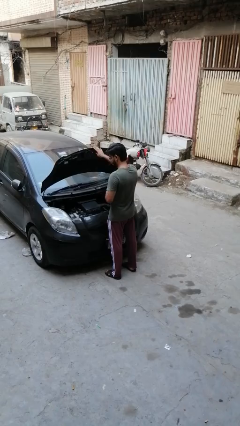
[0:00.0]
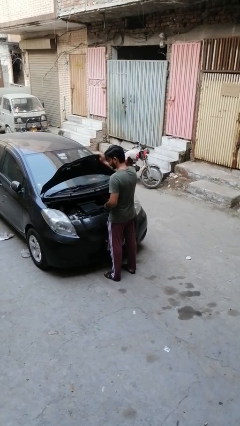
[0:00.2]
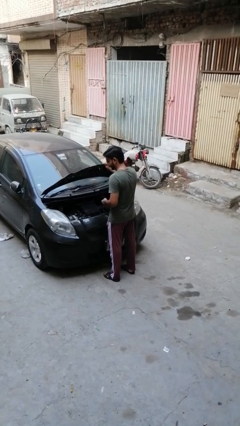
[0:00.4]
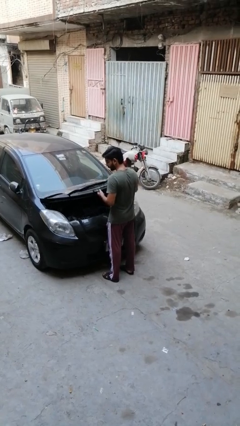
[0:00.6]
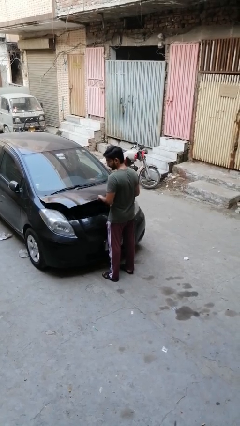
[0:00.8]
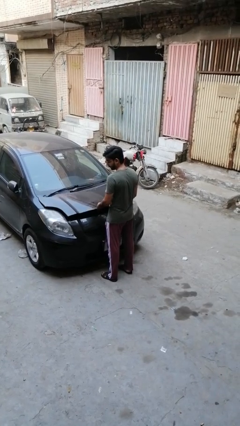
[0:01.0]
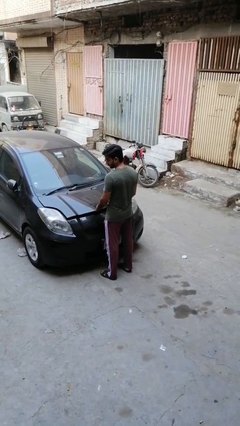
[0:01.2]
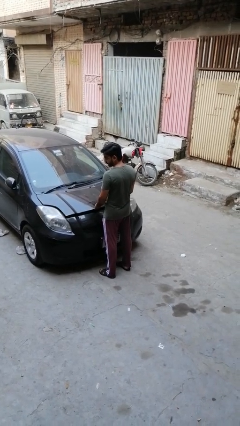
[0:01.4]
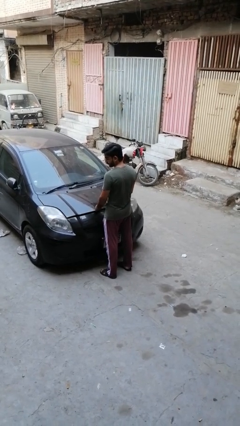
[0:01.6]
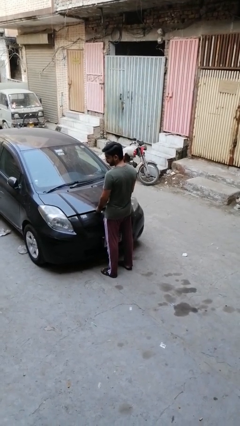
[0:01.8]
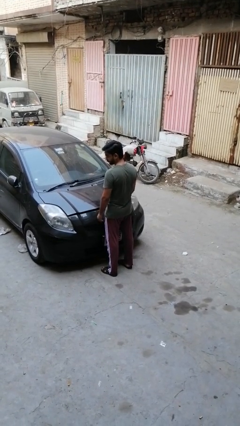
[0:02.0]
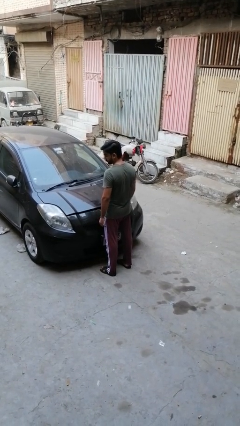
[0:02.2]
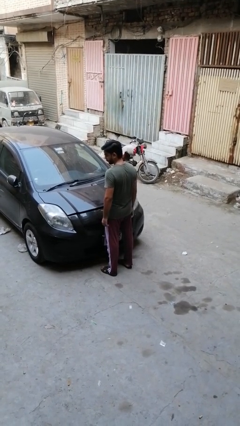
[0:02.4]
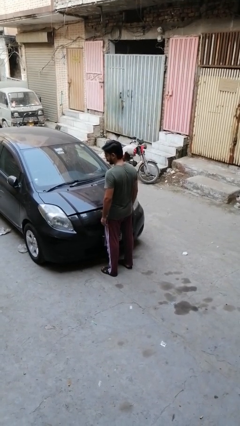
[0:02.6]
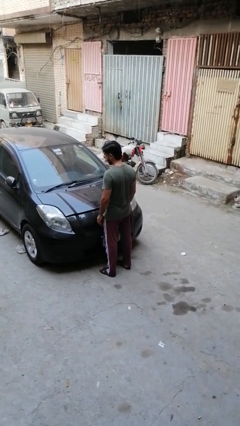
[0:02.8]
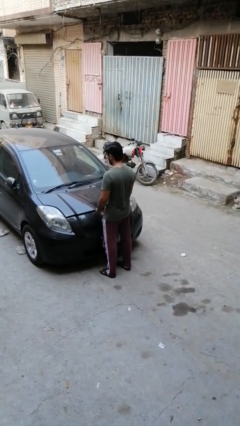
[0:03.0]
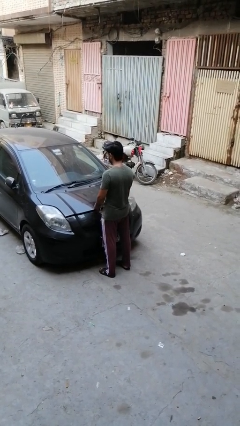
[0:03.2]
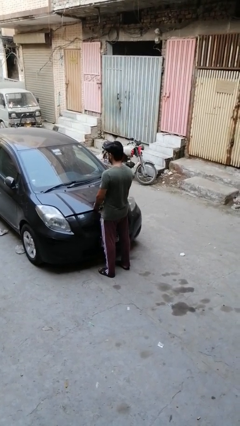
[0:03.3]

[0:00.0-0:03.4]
person closes car hood

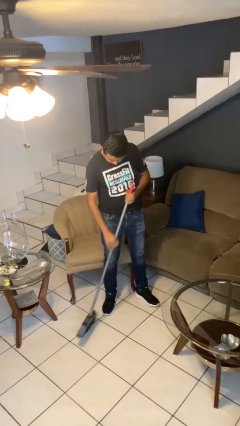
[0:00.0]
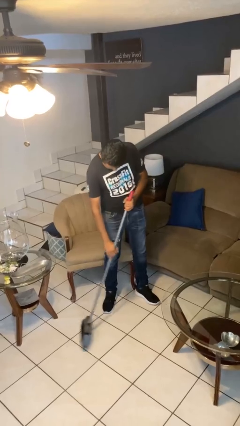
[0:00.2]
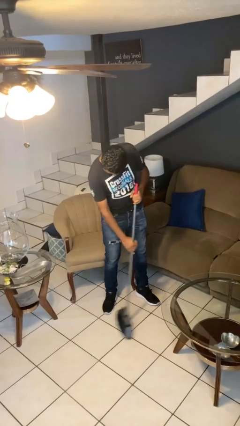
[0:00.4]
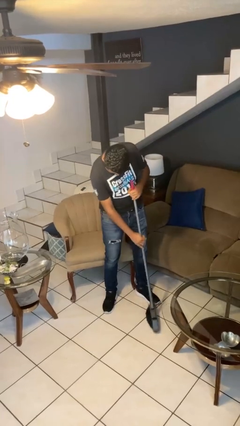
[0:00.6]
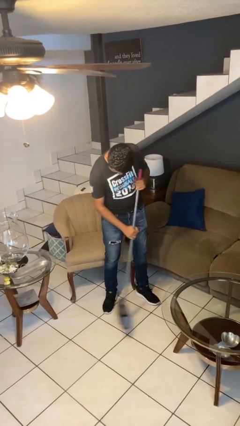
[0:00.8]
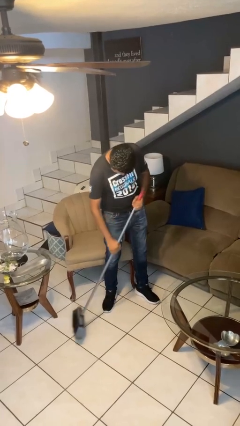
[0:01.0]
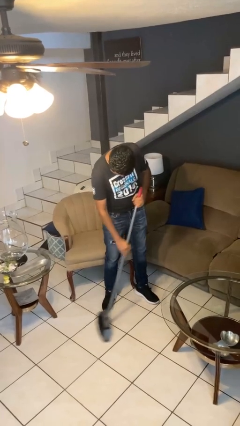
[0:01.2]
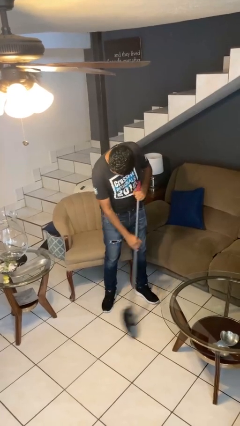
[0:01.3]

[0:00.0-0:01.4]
person sweeps floor

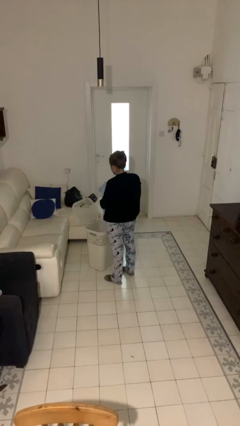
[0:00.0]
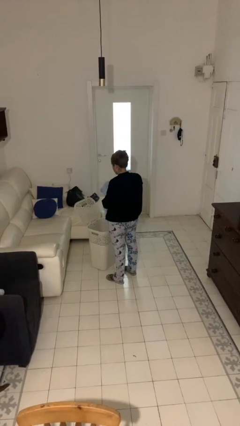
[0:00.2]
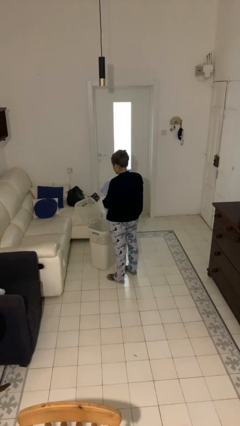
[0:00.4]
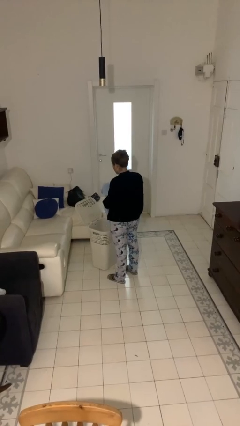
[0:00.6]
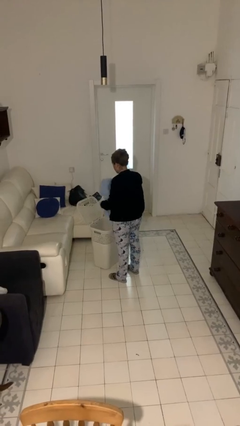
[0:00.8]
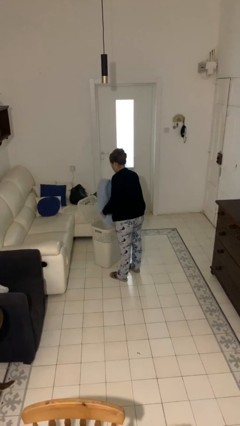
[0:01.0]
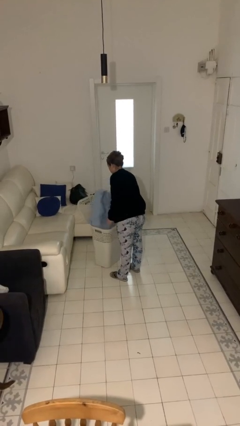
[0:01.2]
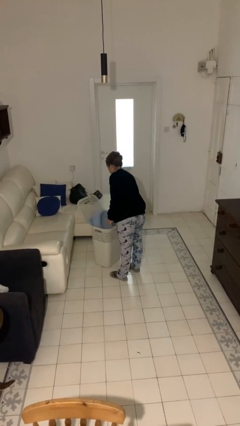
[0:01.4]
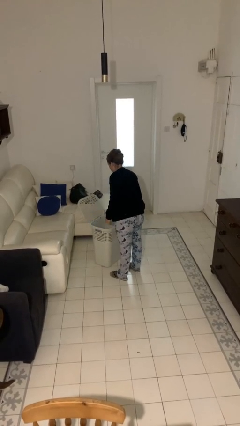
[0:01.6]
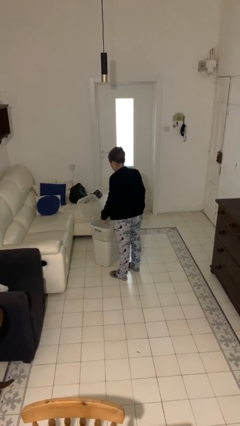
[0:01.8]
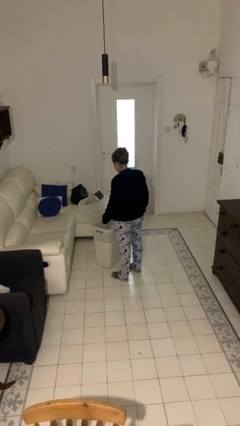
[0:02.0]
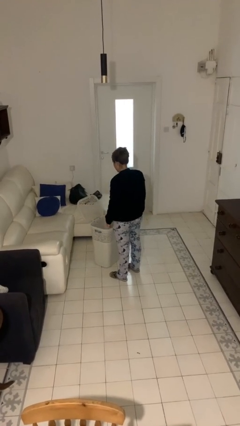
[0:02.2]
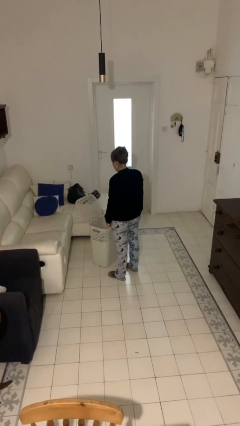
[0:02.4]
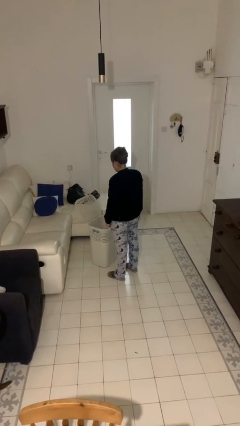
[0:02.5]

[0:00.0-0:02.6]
person puts object into basket

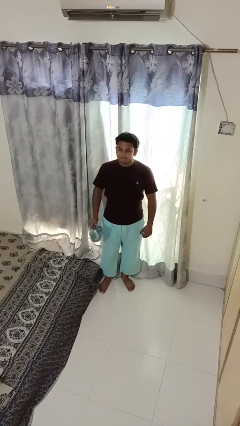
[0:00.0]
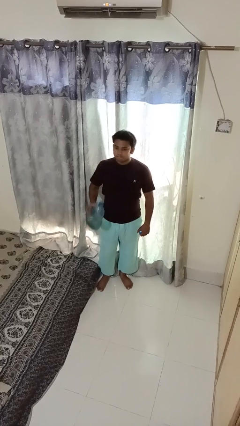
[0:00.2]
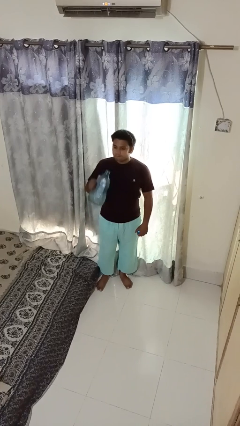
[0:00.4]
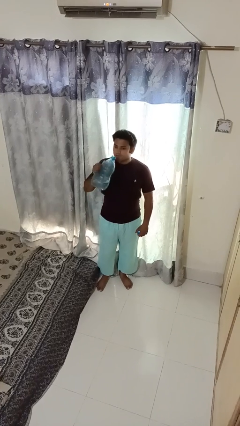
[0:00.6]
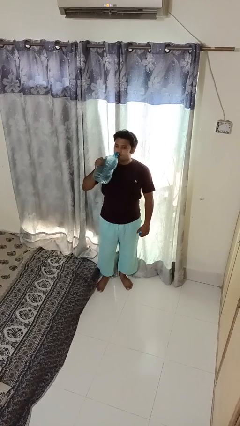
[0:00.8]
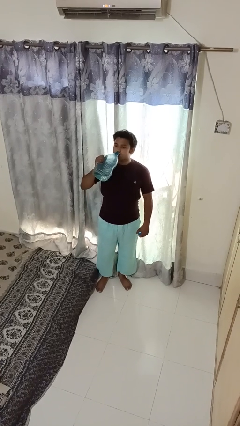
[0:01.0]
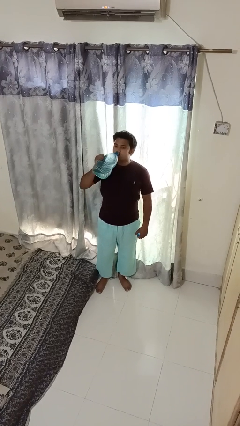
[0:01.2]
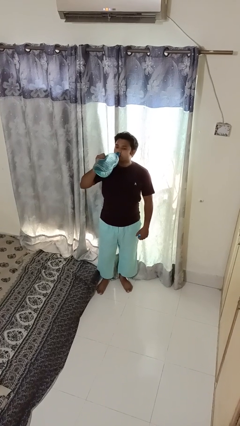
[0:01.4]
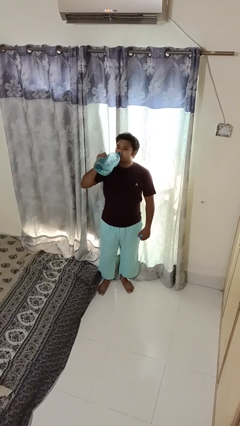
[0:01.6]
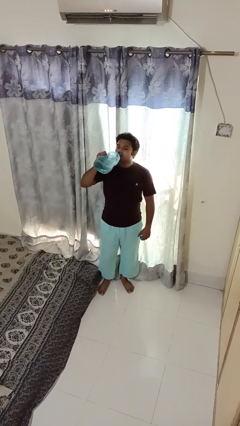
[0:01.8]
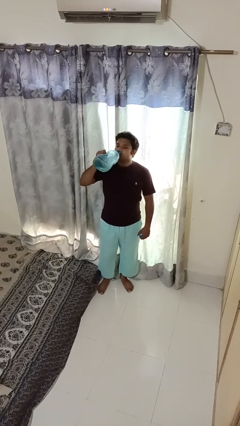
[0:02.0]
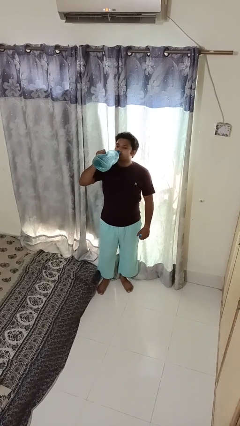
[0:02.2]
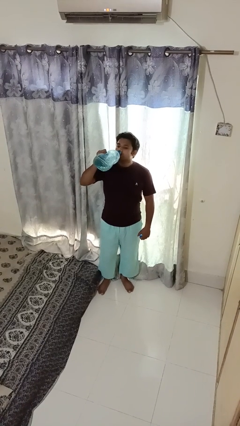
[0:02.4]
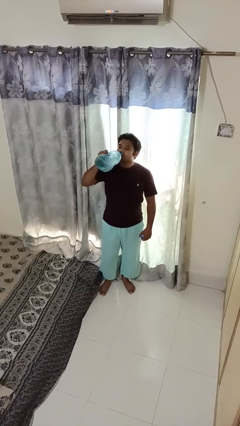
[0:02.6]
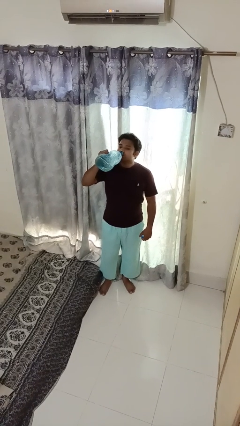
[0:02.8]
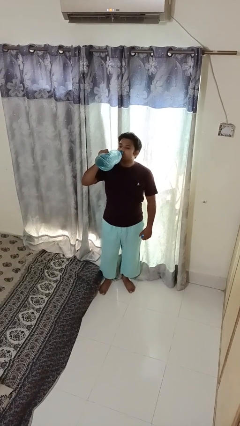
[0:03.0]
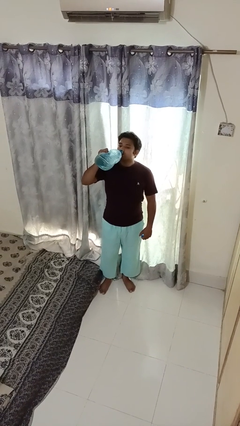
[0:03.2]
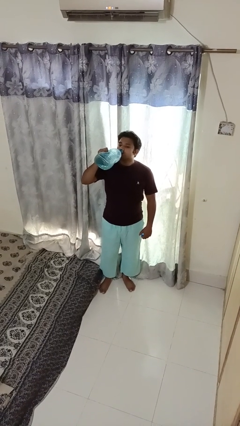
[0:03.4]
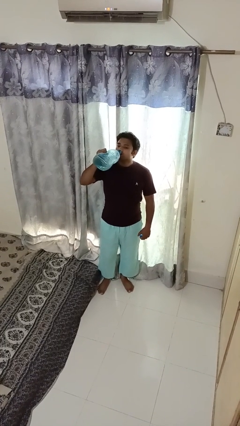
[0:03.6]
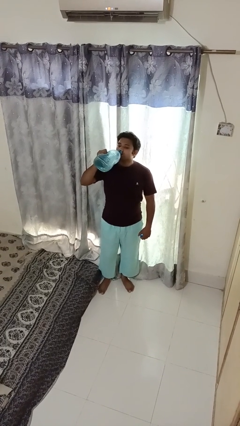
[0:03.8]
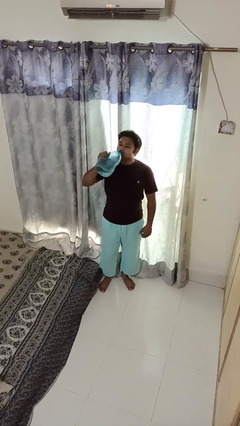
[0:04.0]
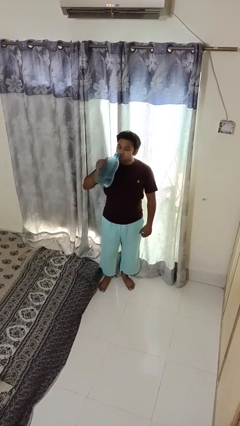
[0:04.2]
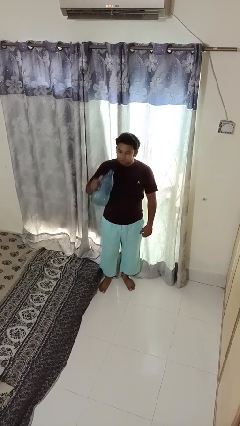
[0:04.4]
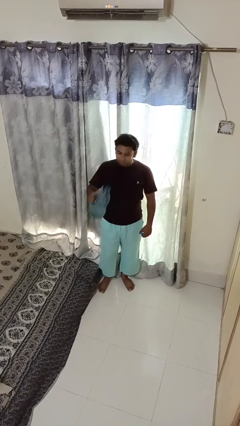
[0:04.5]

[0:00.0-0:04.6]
person drinks from bottle

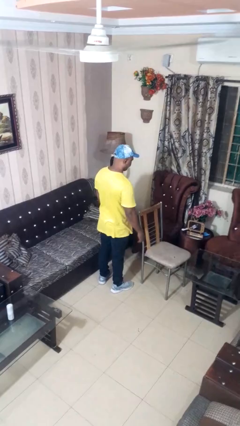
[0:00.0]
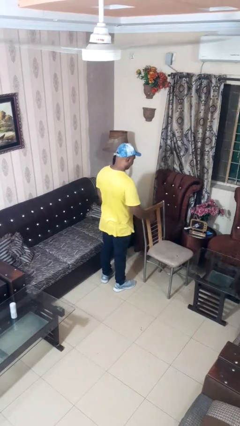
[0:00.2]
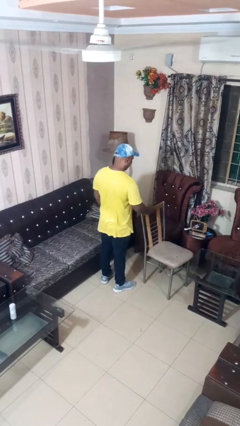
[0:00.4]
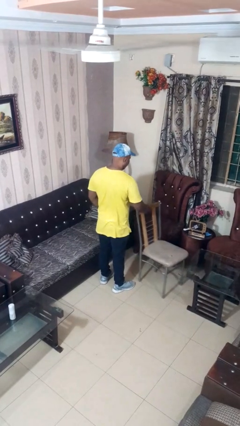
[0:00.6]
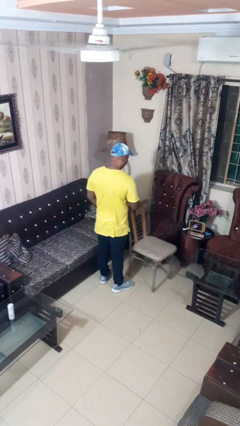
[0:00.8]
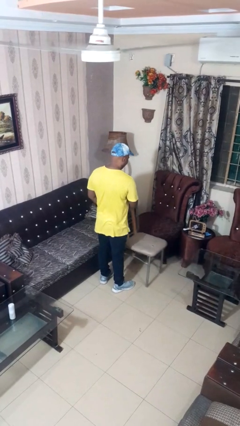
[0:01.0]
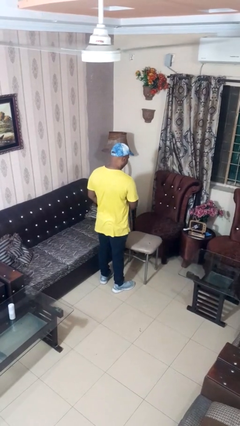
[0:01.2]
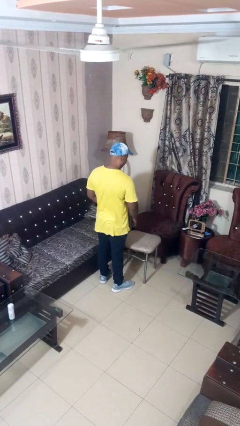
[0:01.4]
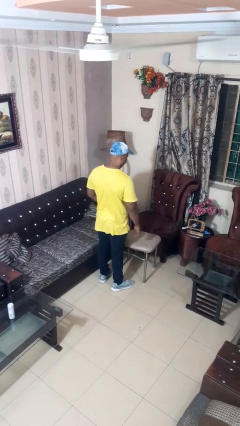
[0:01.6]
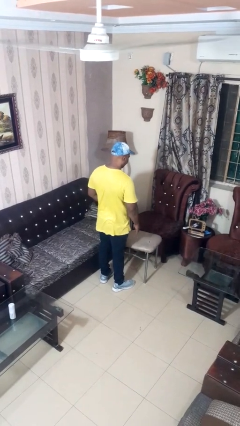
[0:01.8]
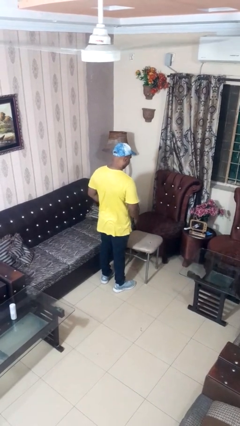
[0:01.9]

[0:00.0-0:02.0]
person pulls out chair

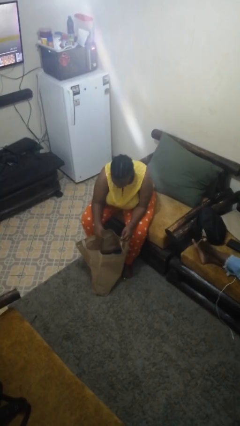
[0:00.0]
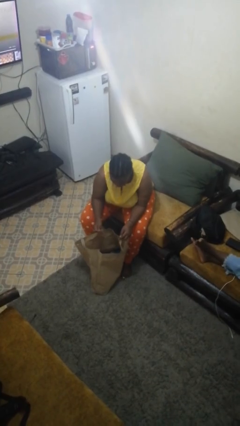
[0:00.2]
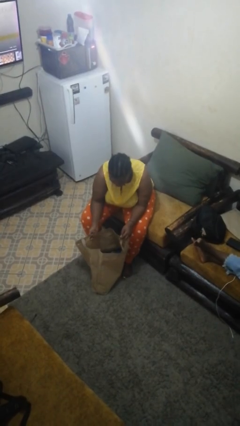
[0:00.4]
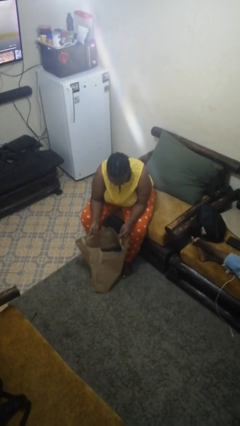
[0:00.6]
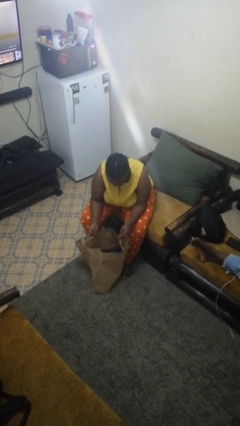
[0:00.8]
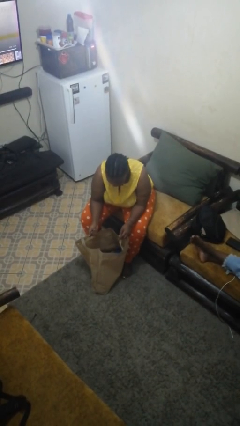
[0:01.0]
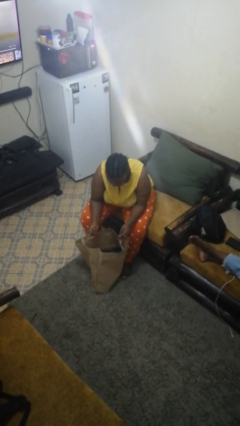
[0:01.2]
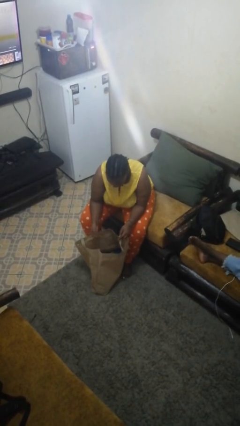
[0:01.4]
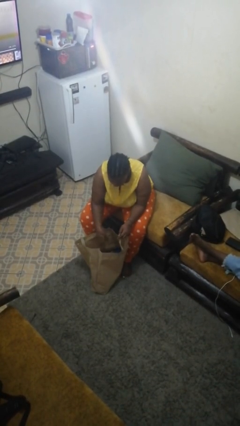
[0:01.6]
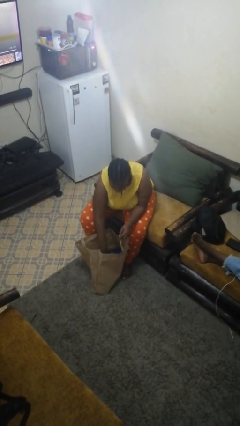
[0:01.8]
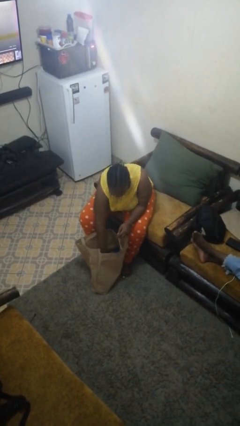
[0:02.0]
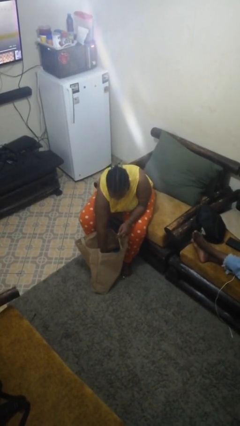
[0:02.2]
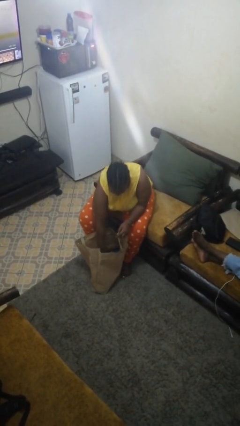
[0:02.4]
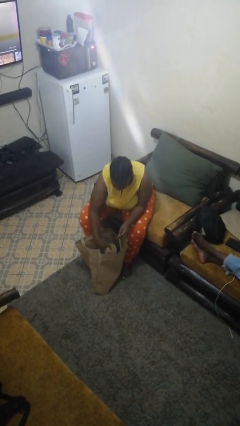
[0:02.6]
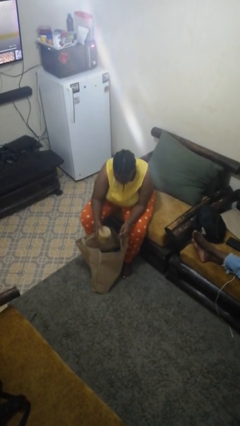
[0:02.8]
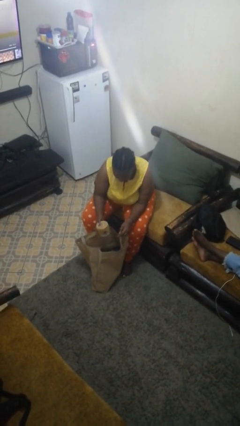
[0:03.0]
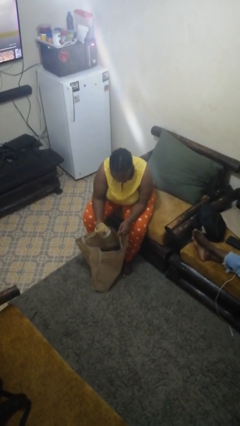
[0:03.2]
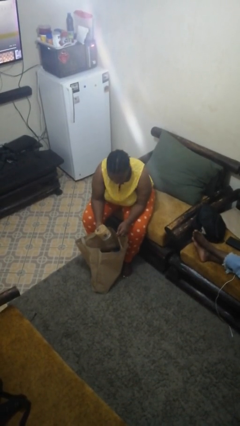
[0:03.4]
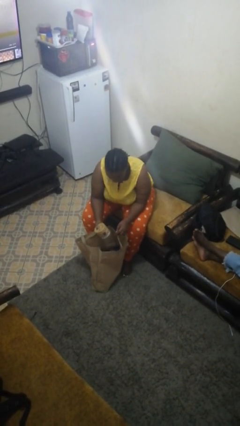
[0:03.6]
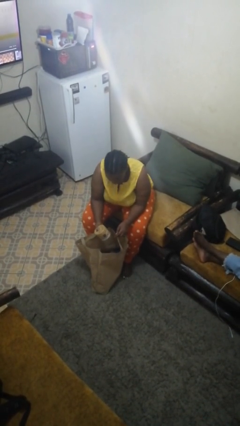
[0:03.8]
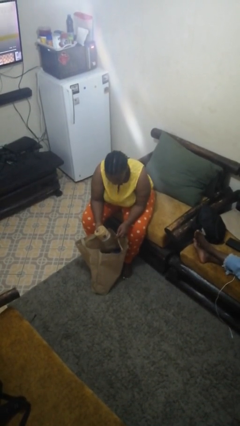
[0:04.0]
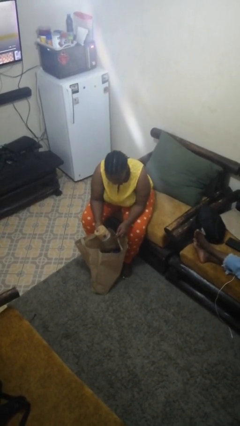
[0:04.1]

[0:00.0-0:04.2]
person takes object from bag
